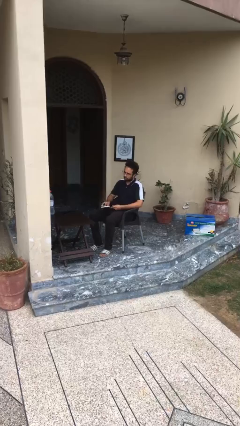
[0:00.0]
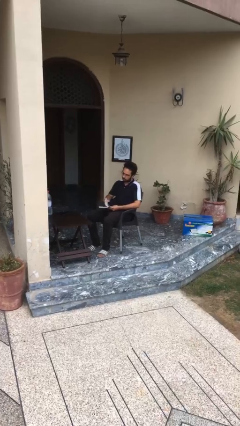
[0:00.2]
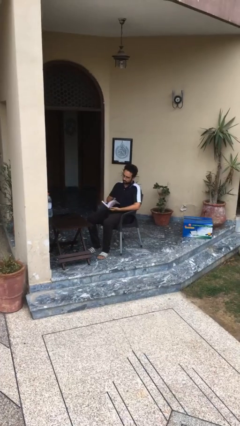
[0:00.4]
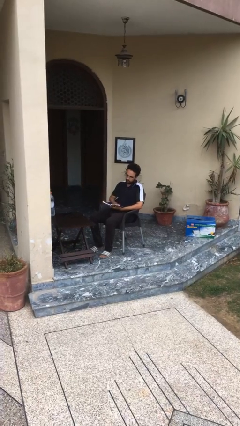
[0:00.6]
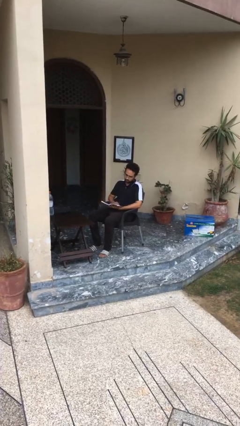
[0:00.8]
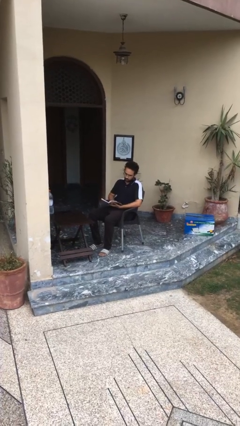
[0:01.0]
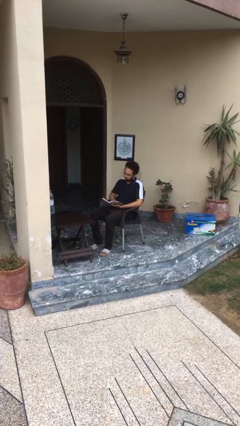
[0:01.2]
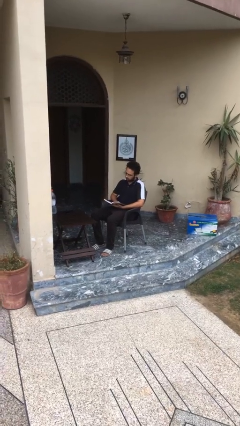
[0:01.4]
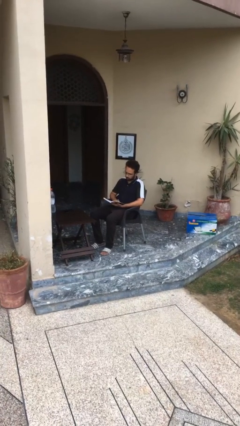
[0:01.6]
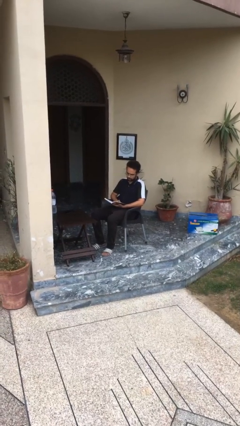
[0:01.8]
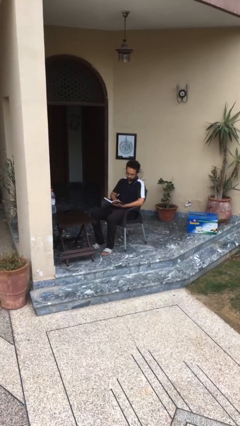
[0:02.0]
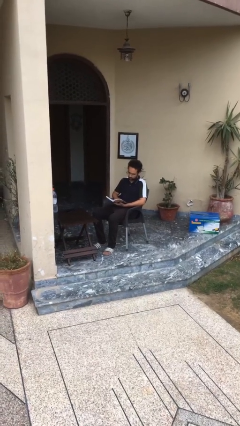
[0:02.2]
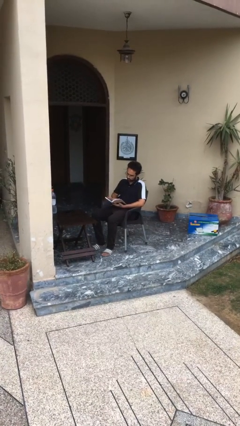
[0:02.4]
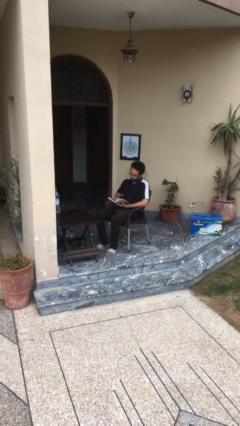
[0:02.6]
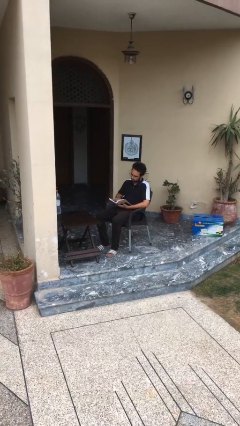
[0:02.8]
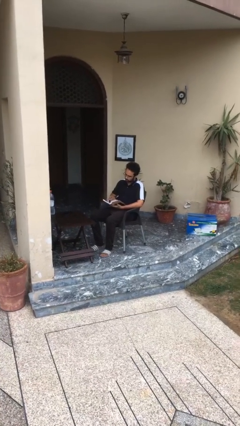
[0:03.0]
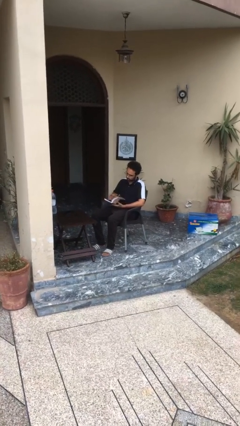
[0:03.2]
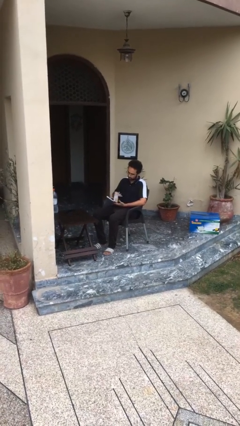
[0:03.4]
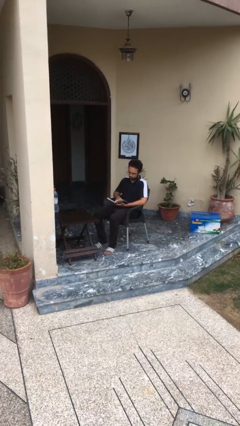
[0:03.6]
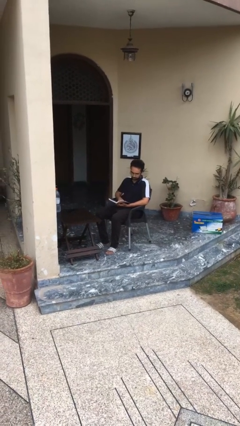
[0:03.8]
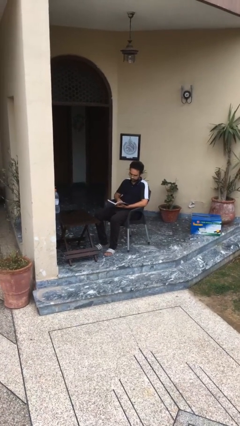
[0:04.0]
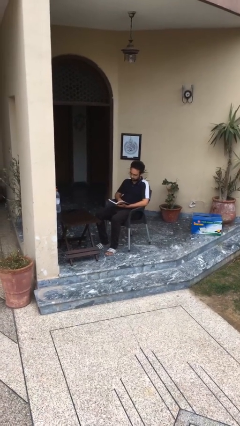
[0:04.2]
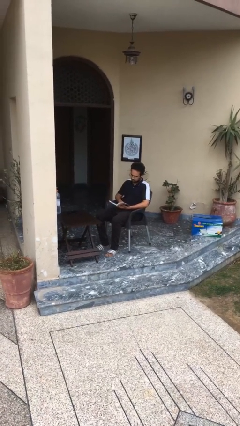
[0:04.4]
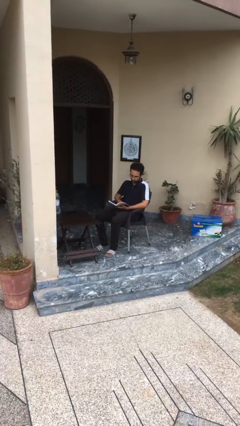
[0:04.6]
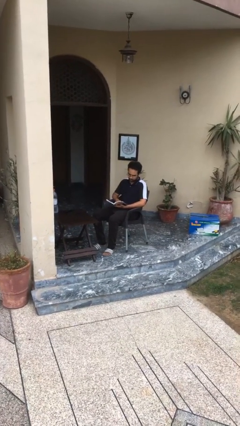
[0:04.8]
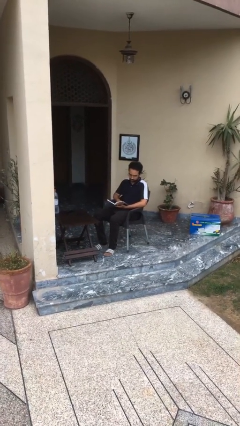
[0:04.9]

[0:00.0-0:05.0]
person reads document

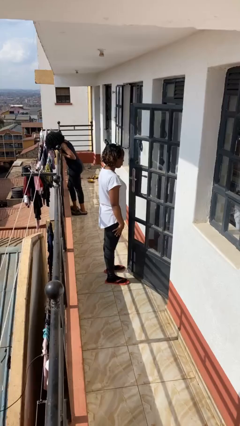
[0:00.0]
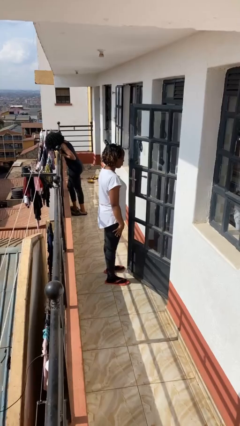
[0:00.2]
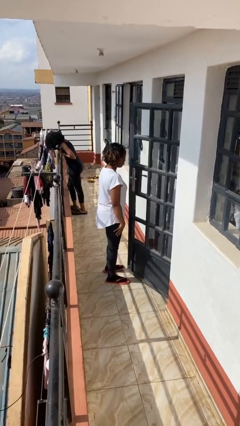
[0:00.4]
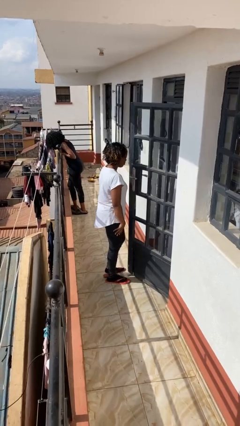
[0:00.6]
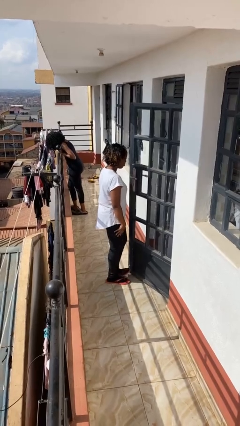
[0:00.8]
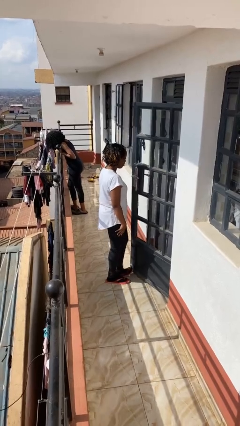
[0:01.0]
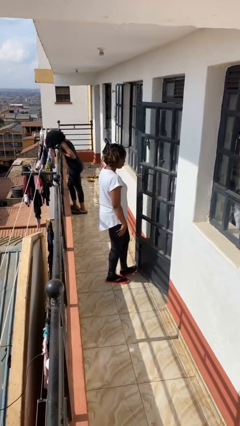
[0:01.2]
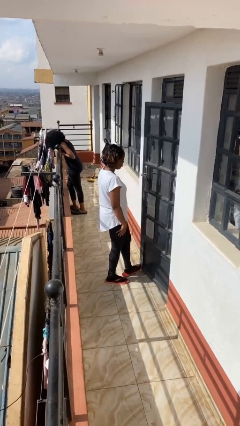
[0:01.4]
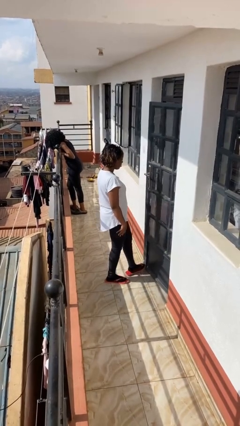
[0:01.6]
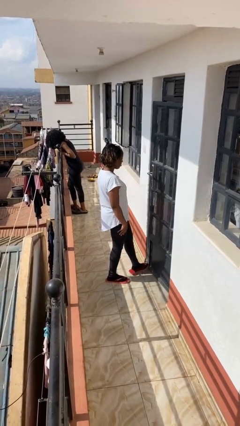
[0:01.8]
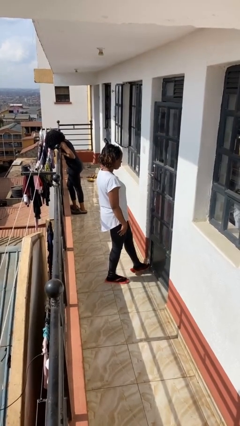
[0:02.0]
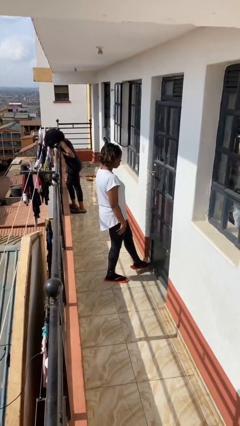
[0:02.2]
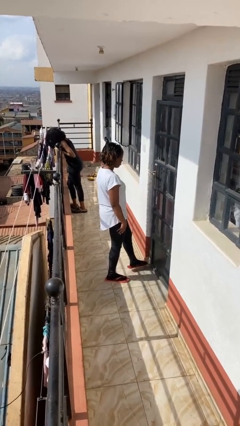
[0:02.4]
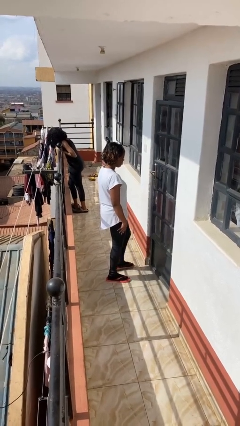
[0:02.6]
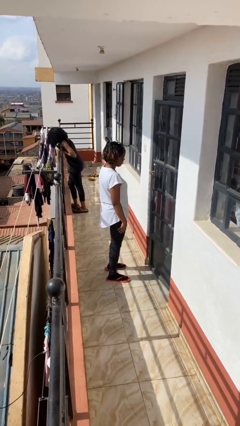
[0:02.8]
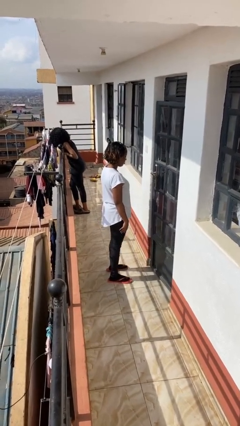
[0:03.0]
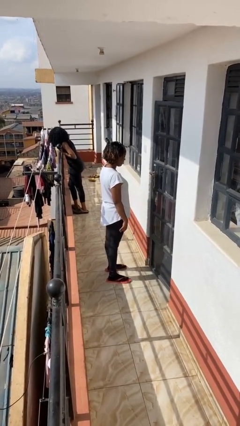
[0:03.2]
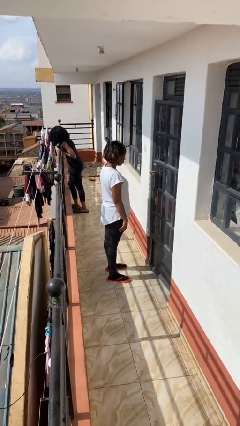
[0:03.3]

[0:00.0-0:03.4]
person closes door with foot

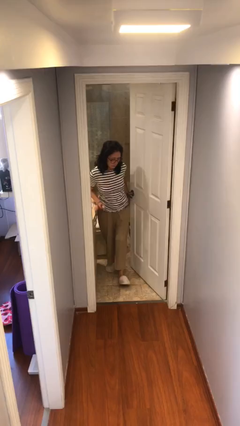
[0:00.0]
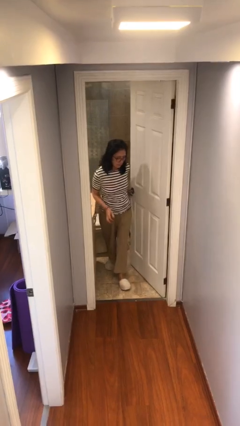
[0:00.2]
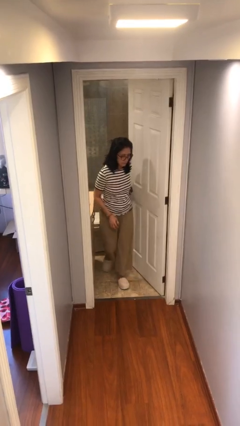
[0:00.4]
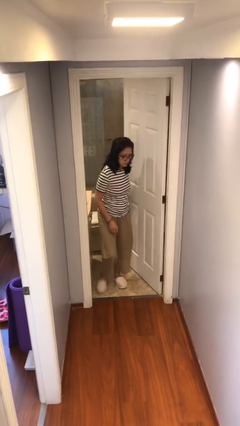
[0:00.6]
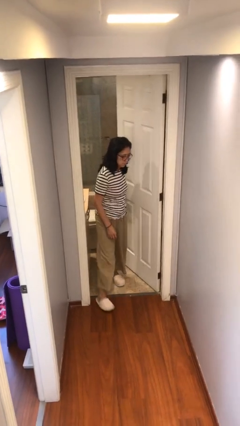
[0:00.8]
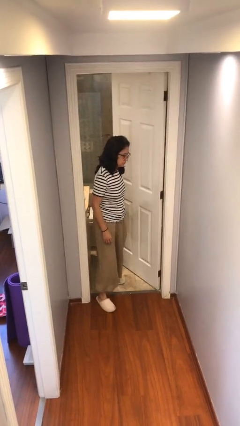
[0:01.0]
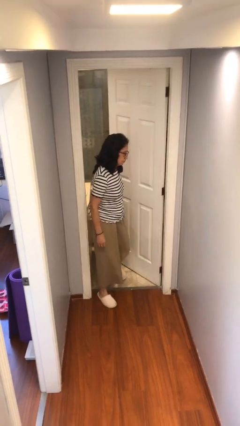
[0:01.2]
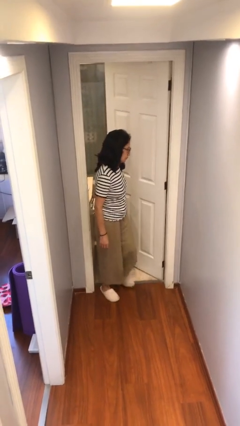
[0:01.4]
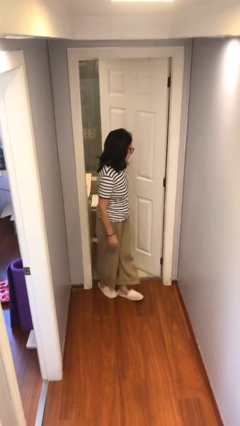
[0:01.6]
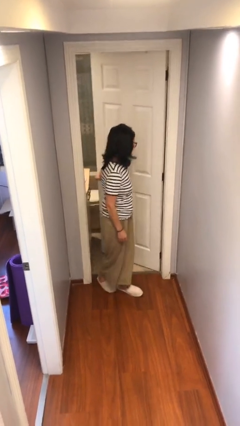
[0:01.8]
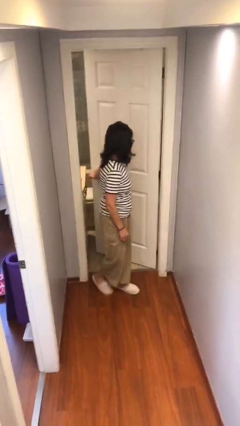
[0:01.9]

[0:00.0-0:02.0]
person enters scene through structure

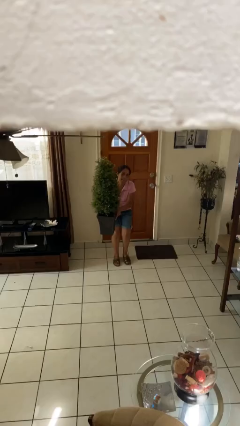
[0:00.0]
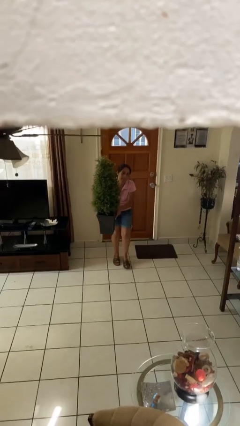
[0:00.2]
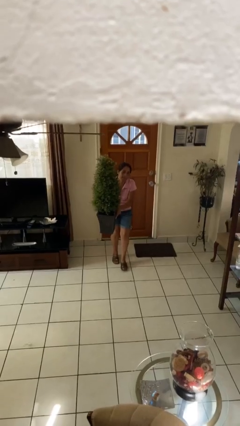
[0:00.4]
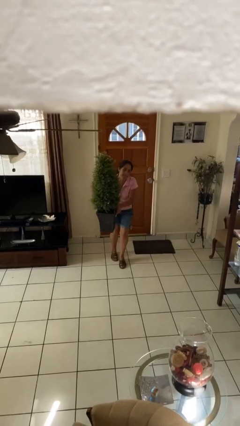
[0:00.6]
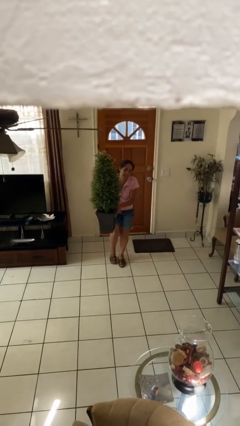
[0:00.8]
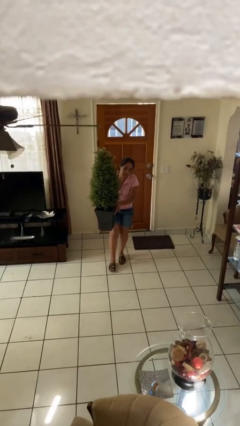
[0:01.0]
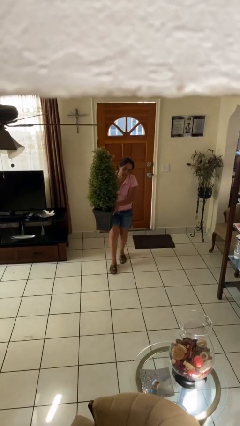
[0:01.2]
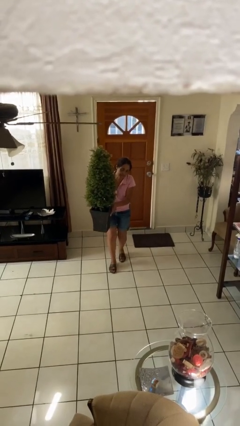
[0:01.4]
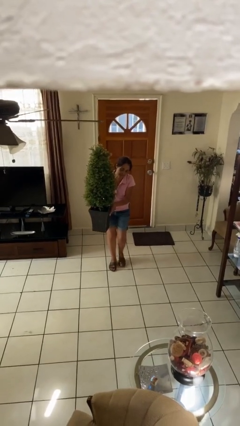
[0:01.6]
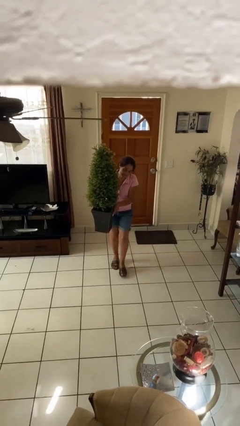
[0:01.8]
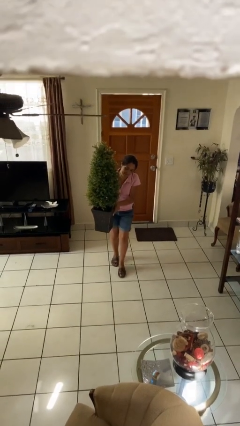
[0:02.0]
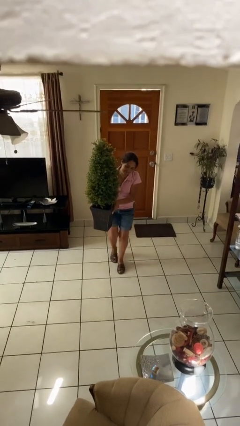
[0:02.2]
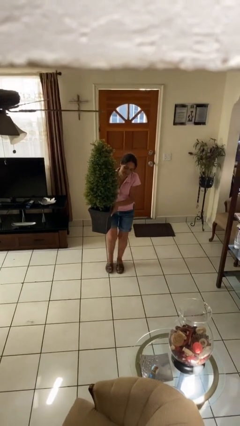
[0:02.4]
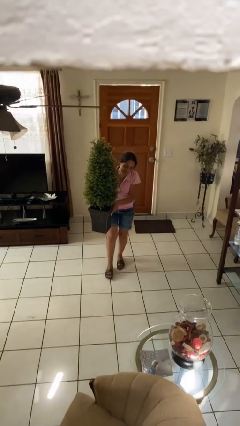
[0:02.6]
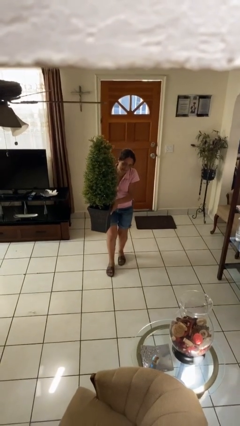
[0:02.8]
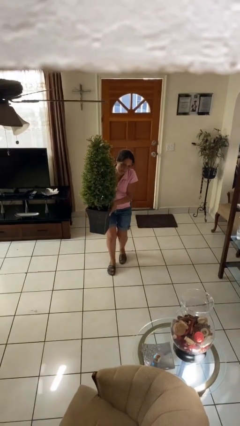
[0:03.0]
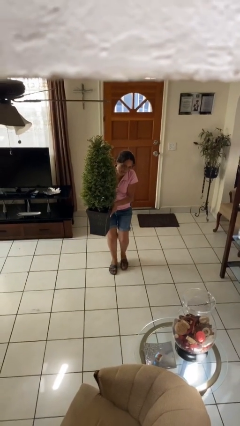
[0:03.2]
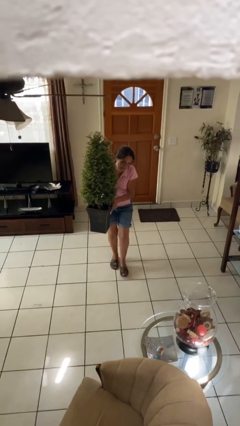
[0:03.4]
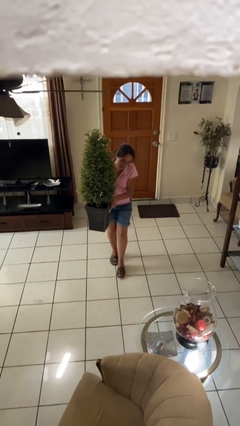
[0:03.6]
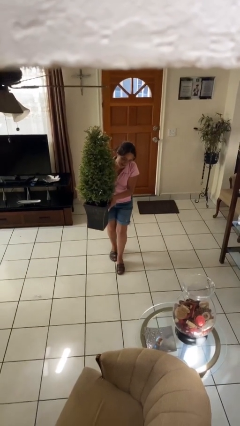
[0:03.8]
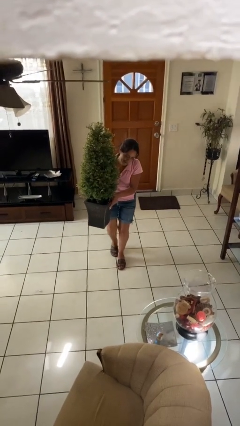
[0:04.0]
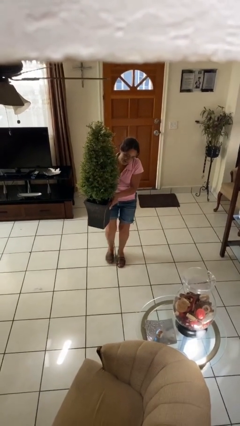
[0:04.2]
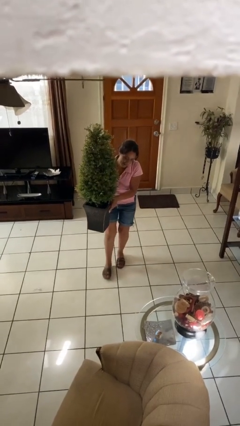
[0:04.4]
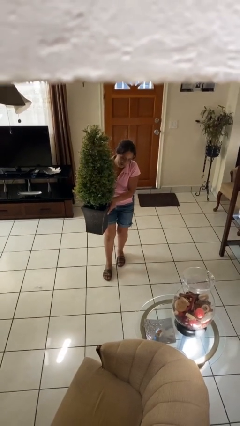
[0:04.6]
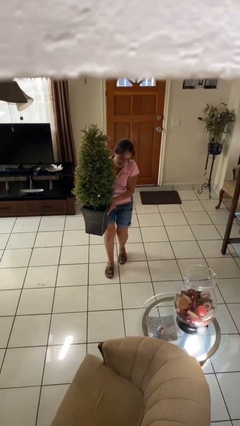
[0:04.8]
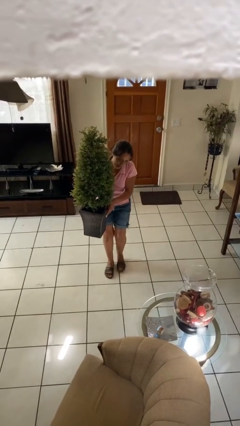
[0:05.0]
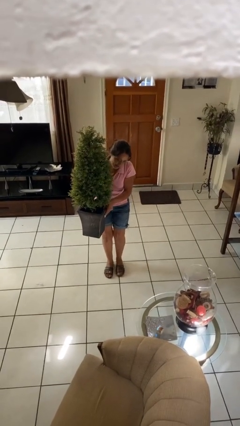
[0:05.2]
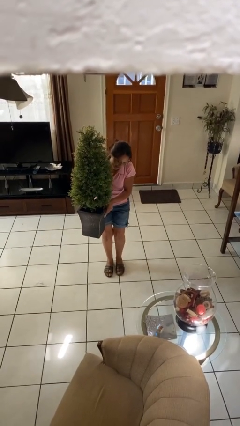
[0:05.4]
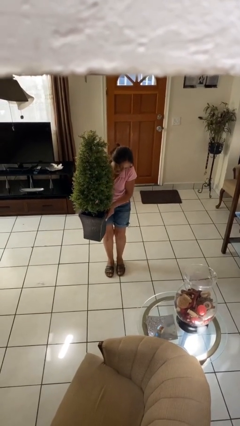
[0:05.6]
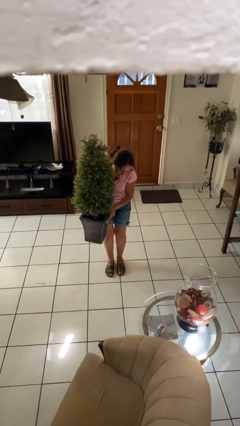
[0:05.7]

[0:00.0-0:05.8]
person carries heavy object

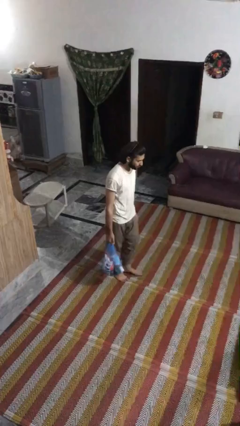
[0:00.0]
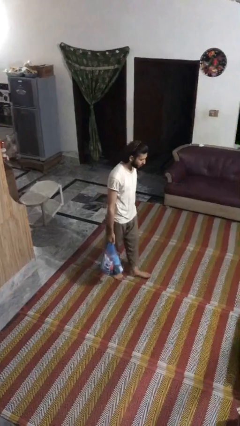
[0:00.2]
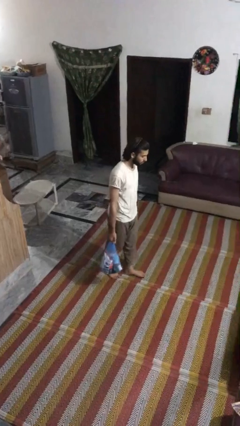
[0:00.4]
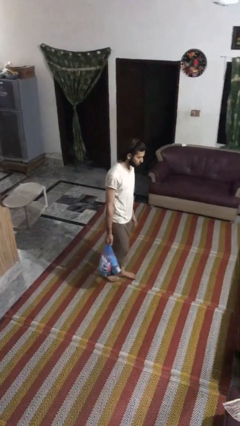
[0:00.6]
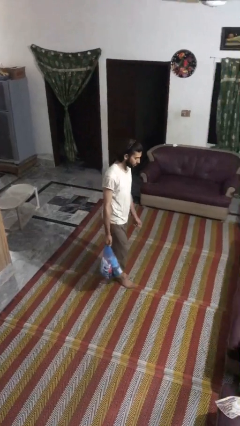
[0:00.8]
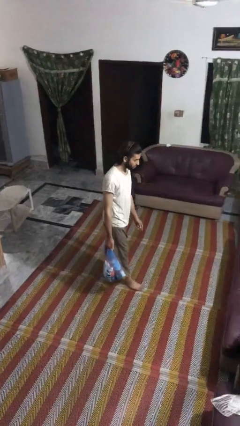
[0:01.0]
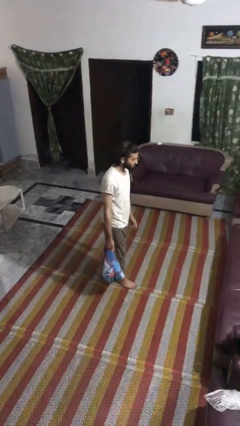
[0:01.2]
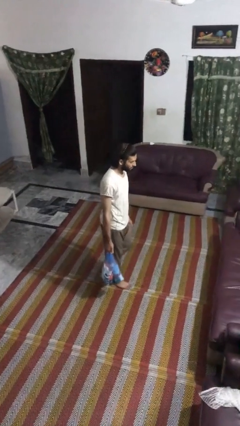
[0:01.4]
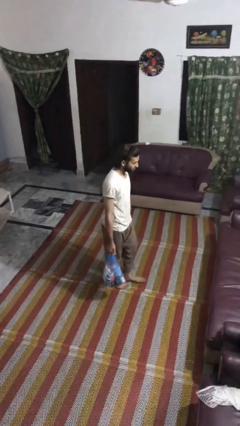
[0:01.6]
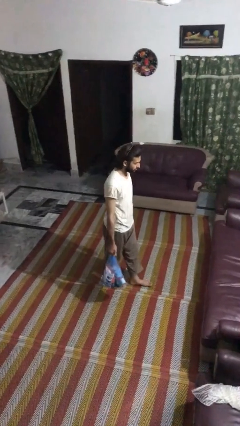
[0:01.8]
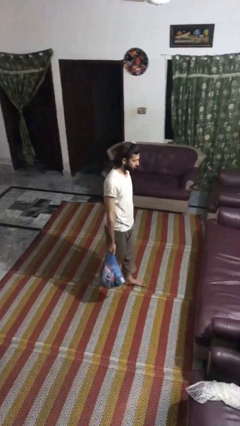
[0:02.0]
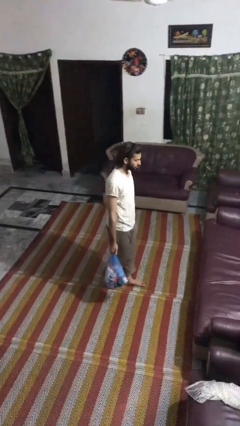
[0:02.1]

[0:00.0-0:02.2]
person carries groceries
